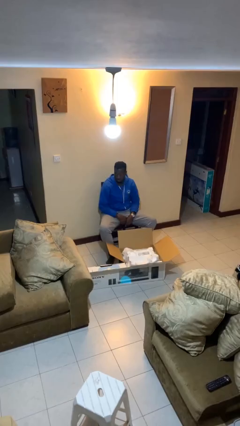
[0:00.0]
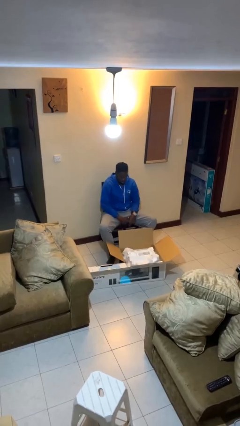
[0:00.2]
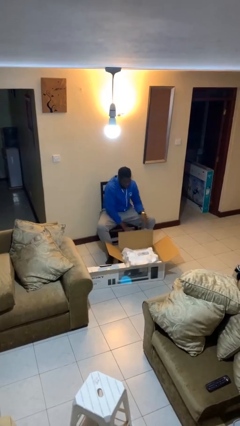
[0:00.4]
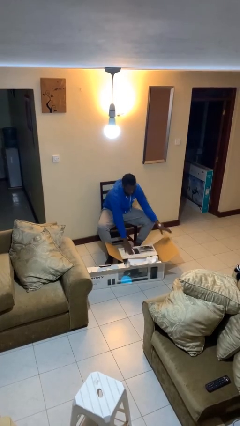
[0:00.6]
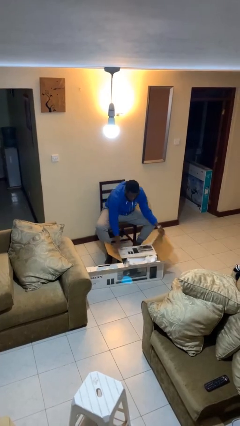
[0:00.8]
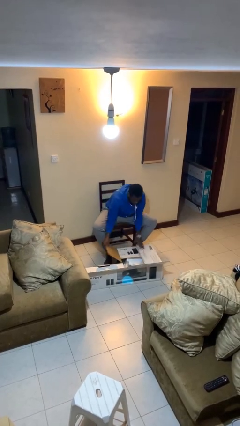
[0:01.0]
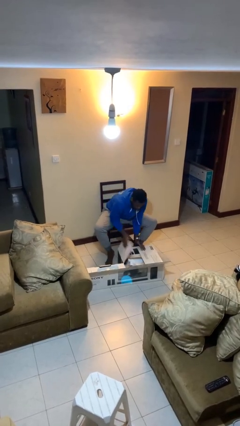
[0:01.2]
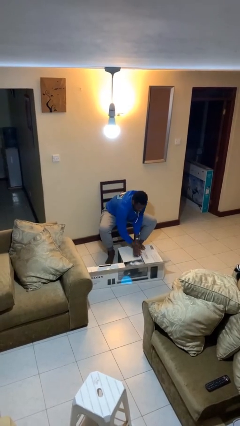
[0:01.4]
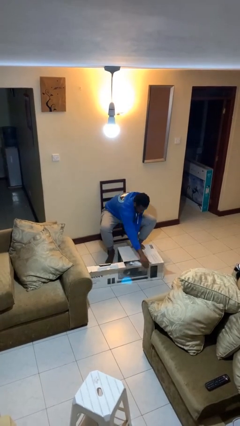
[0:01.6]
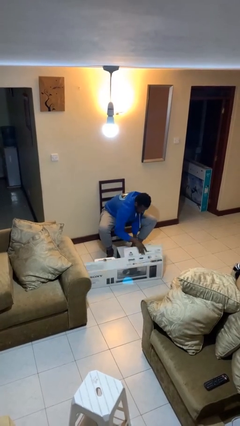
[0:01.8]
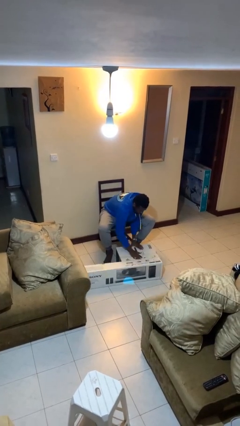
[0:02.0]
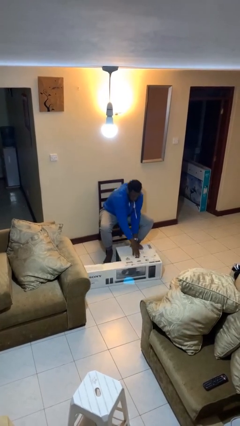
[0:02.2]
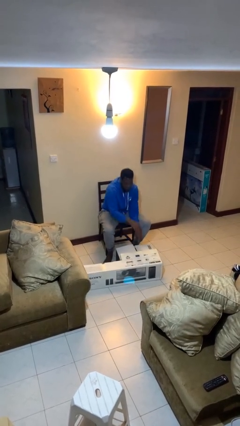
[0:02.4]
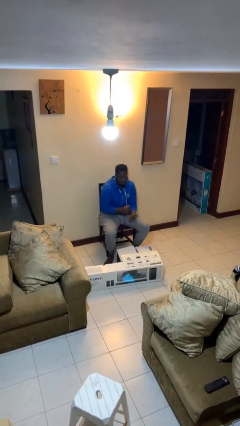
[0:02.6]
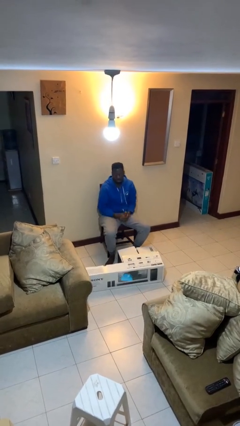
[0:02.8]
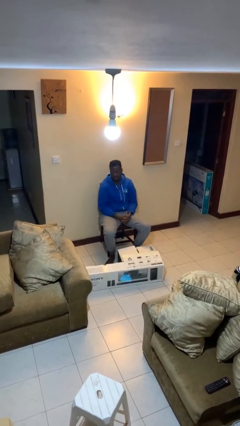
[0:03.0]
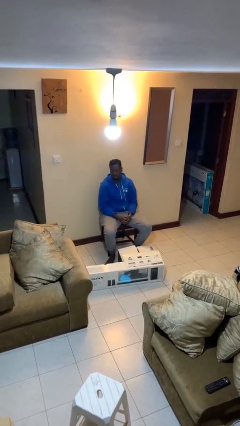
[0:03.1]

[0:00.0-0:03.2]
person closes box

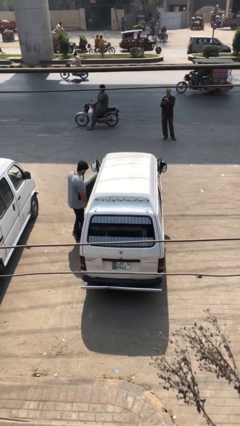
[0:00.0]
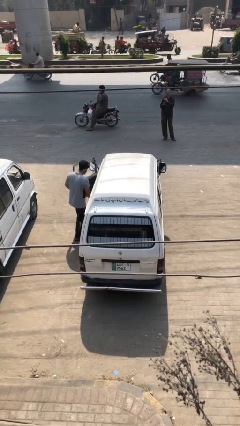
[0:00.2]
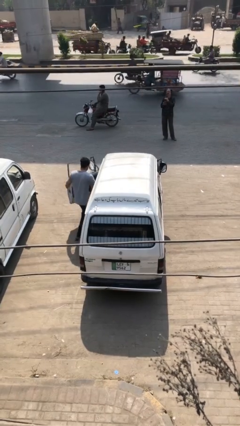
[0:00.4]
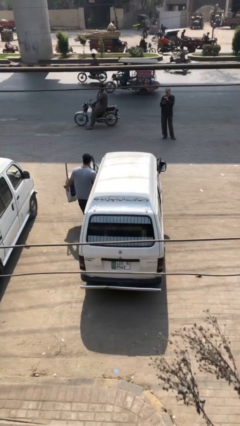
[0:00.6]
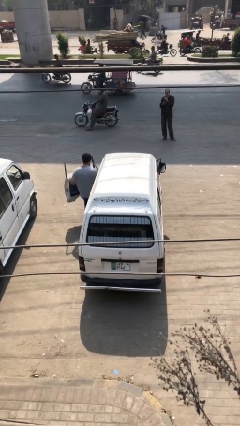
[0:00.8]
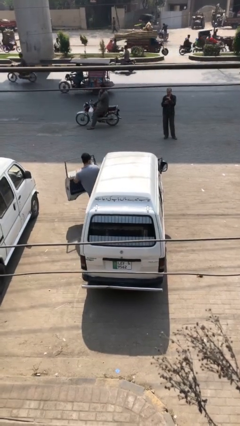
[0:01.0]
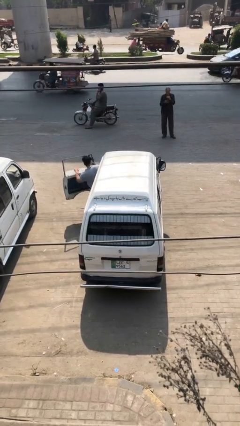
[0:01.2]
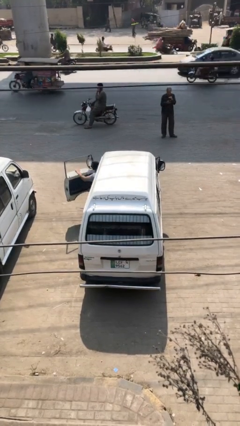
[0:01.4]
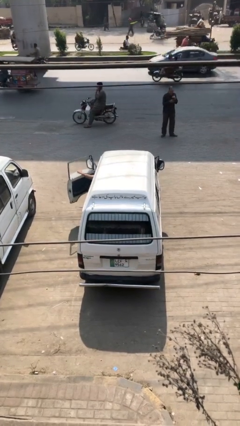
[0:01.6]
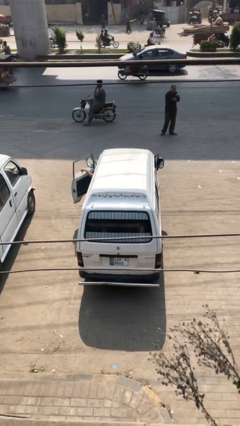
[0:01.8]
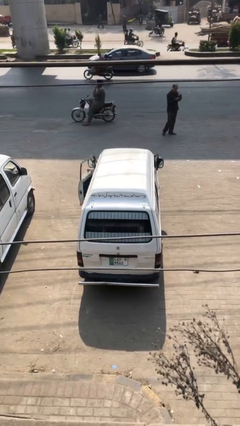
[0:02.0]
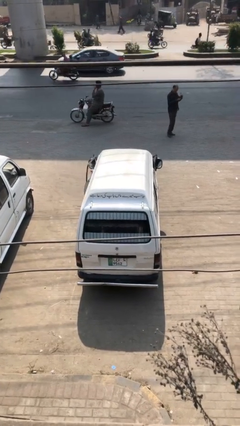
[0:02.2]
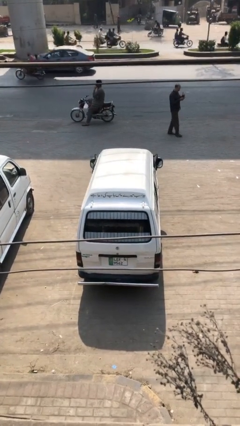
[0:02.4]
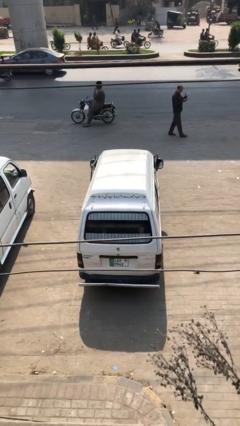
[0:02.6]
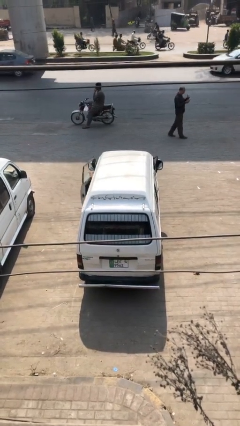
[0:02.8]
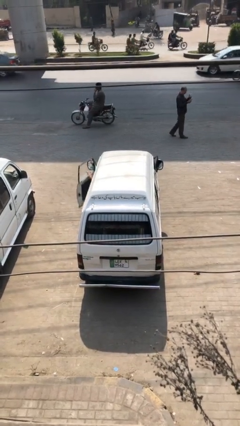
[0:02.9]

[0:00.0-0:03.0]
car picks up person

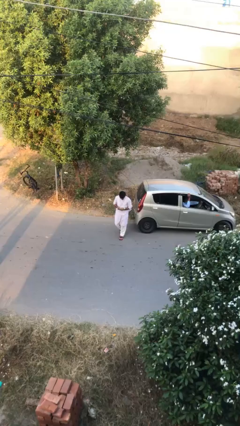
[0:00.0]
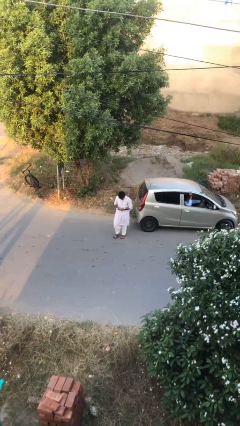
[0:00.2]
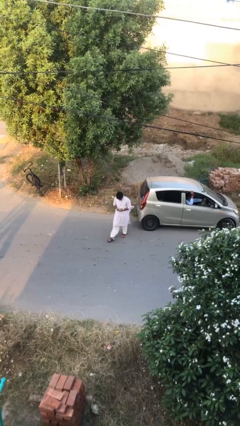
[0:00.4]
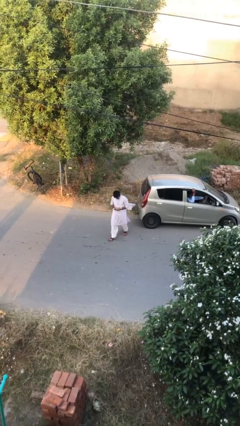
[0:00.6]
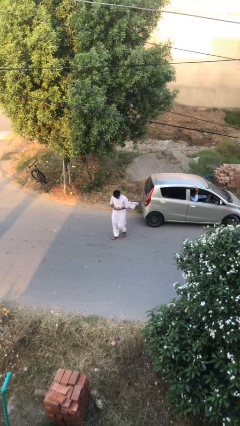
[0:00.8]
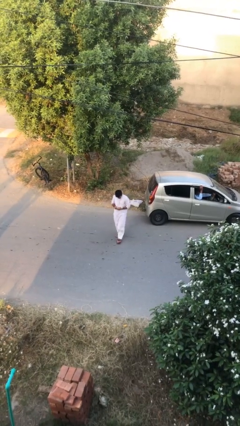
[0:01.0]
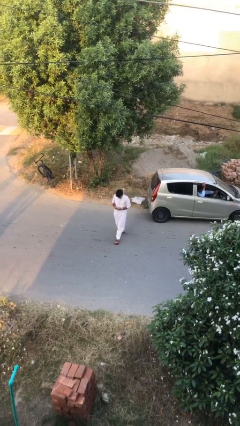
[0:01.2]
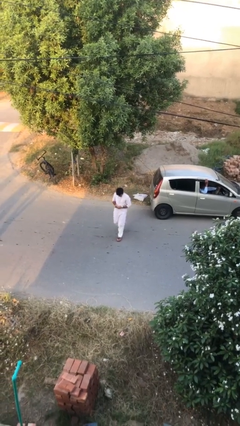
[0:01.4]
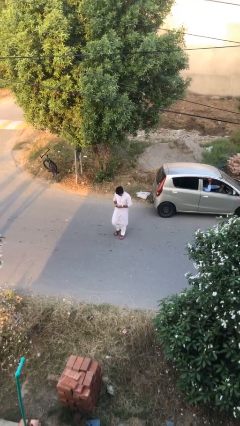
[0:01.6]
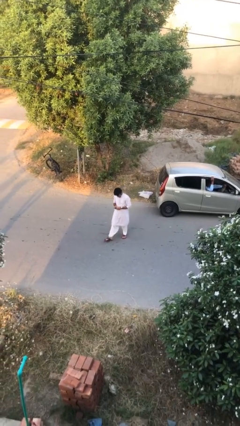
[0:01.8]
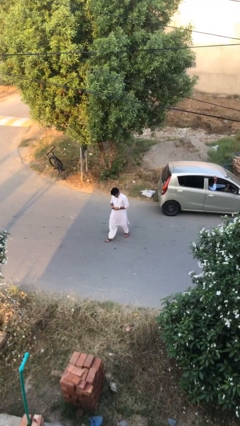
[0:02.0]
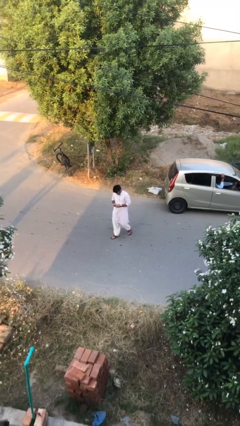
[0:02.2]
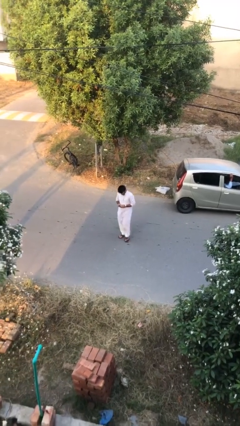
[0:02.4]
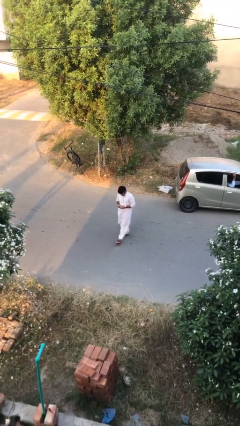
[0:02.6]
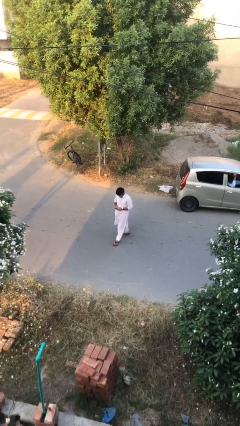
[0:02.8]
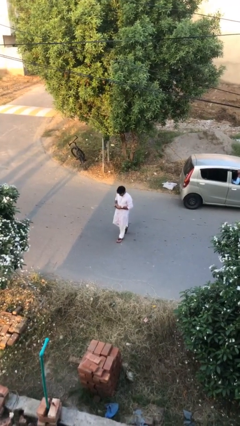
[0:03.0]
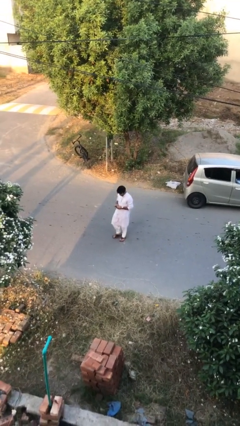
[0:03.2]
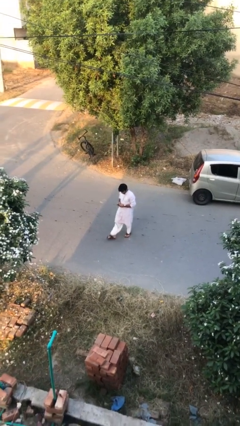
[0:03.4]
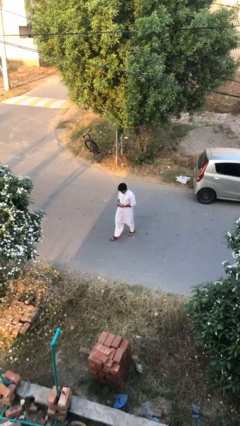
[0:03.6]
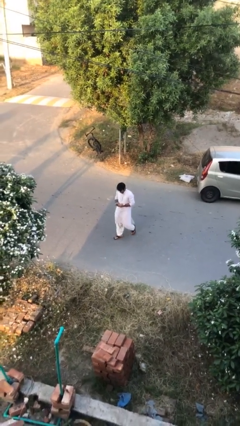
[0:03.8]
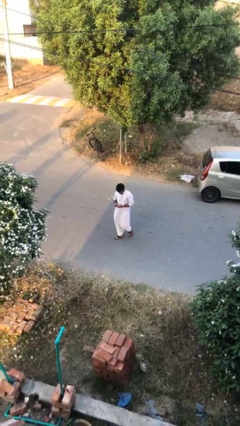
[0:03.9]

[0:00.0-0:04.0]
person texts on phone

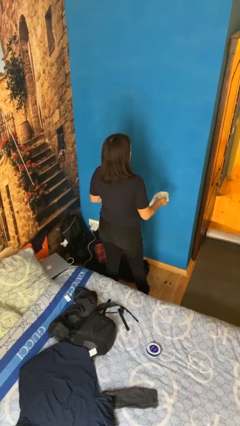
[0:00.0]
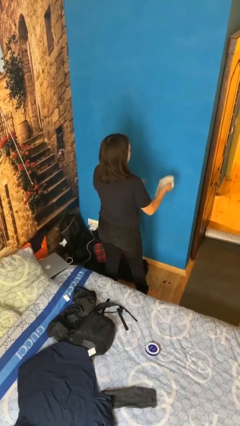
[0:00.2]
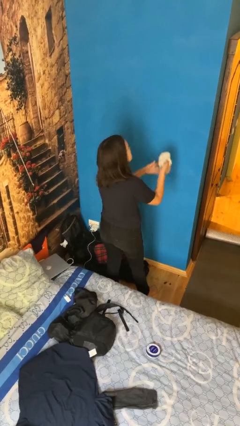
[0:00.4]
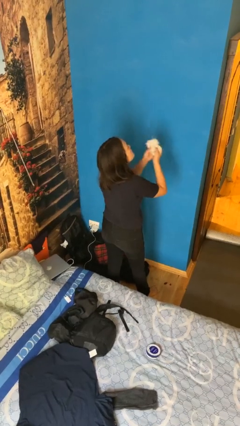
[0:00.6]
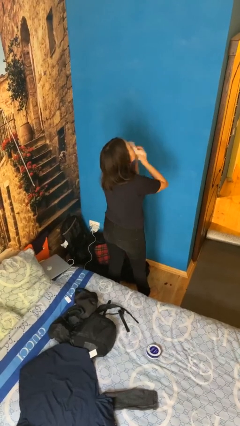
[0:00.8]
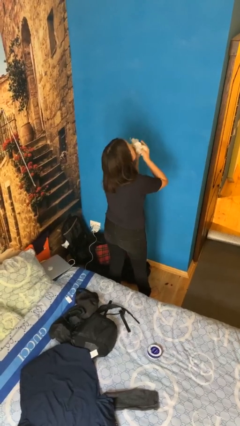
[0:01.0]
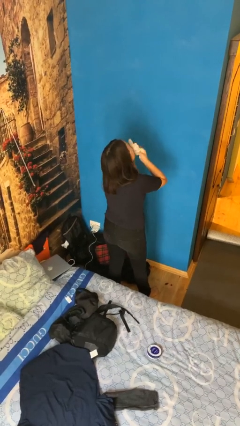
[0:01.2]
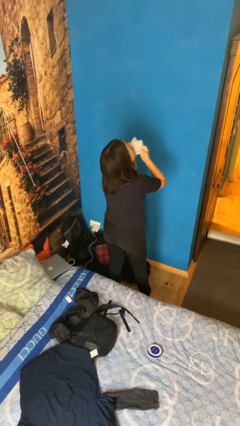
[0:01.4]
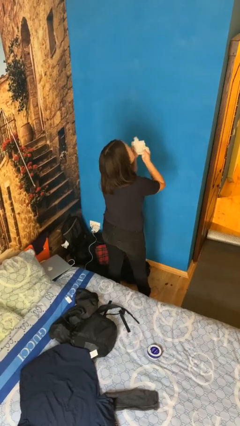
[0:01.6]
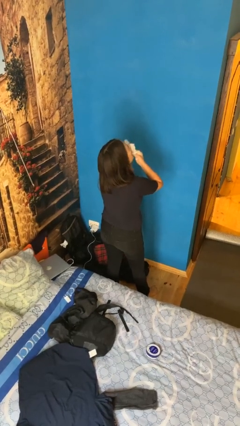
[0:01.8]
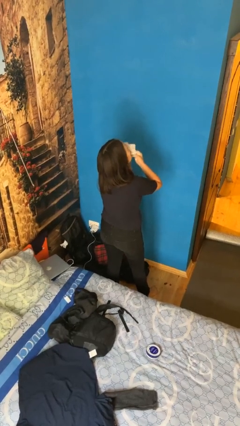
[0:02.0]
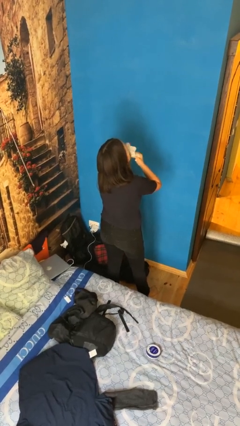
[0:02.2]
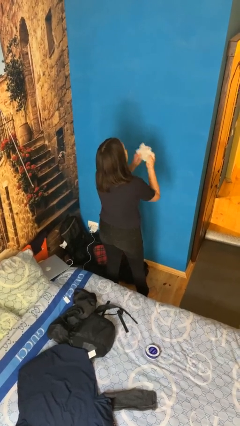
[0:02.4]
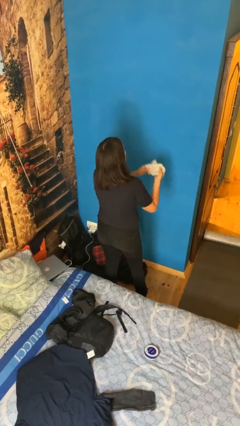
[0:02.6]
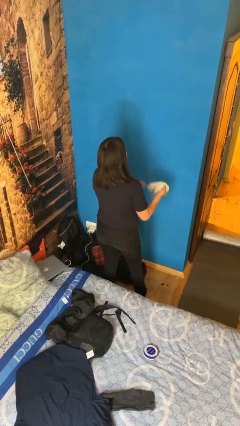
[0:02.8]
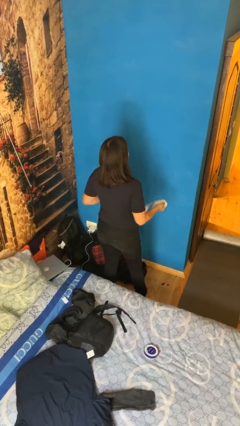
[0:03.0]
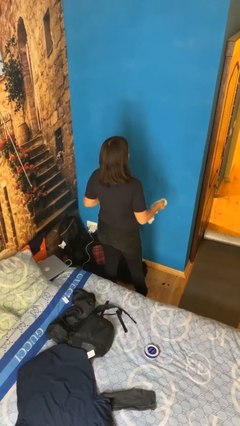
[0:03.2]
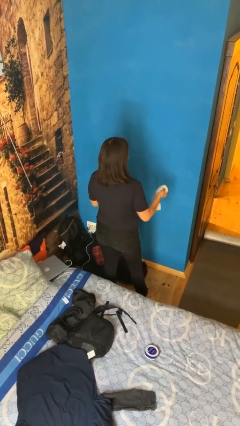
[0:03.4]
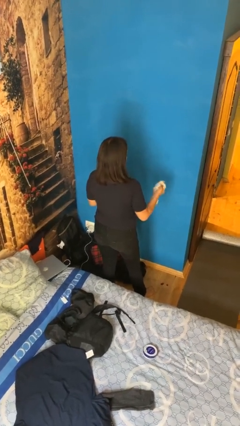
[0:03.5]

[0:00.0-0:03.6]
person wipes mouth with napkin

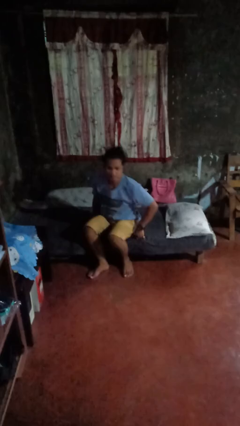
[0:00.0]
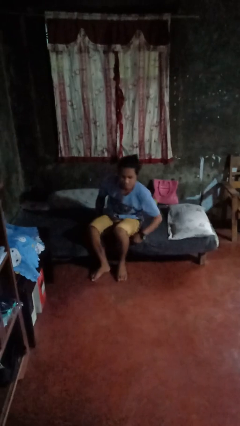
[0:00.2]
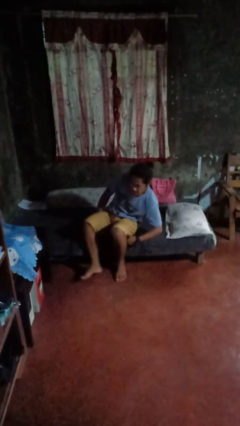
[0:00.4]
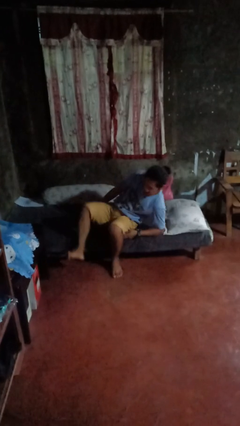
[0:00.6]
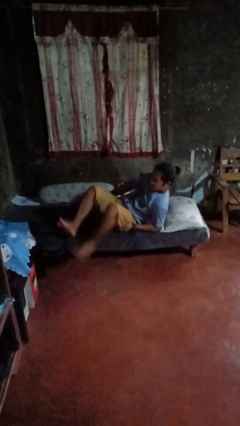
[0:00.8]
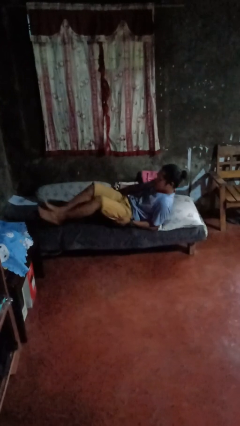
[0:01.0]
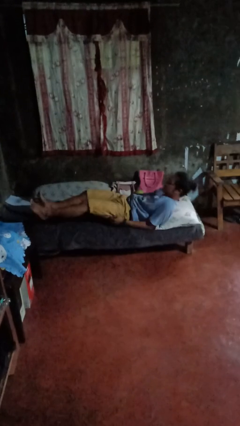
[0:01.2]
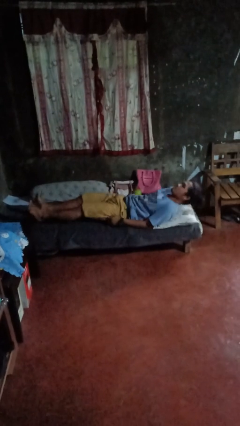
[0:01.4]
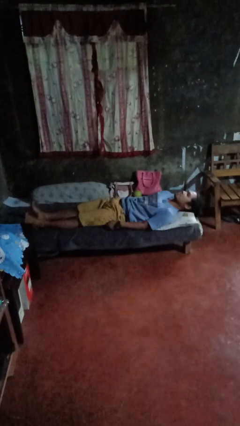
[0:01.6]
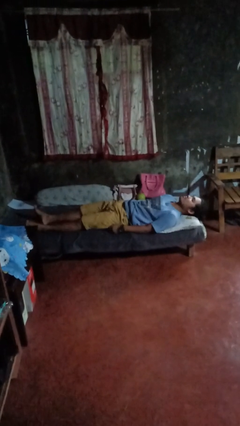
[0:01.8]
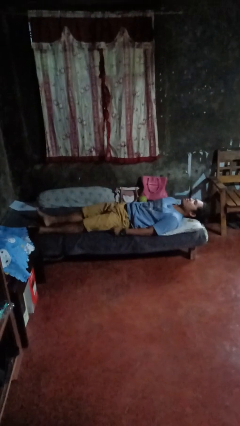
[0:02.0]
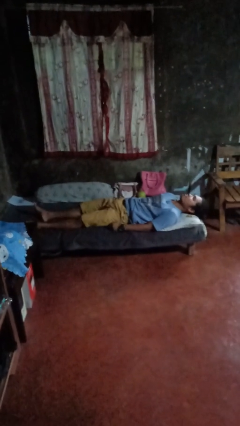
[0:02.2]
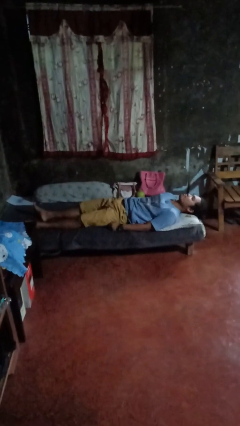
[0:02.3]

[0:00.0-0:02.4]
person lies down on bed

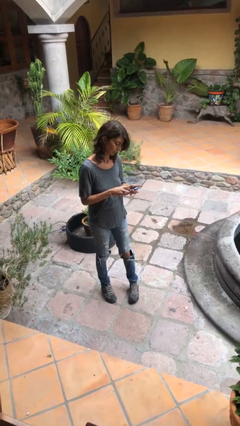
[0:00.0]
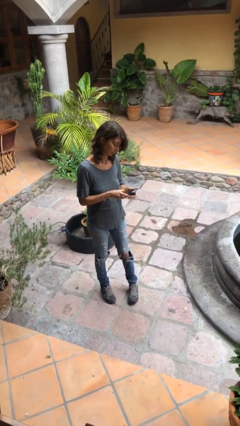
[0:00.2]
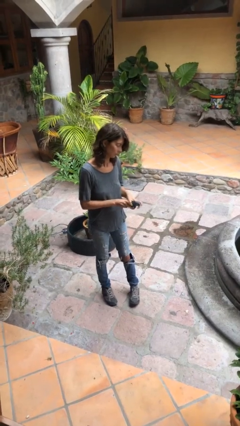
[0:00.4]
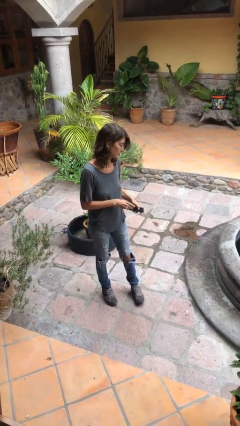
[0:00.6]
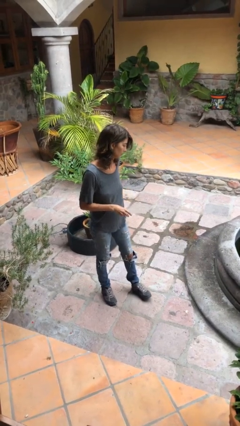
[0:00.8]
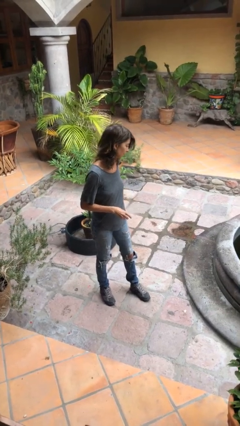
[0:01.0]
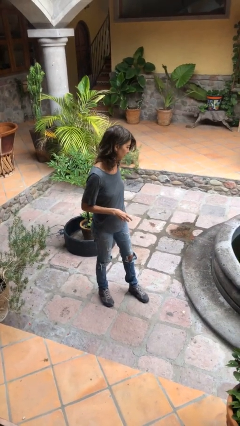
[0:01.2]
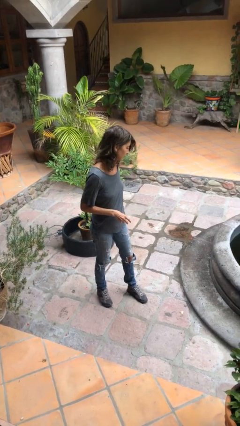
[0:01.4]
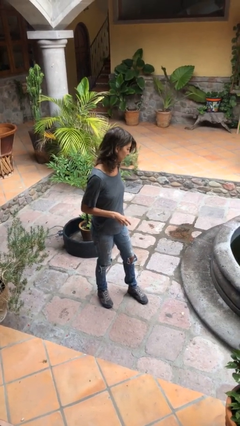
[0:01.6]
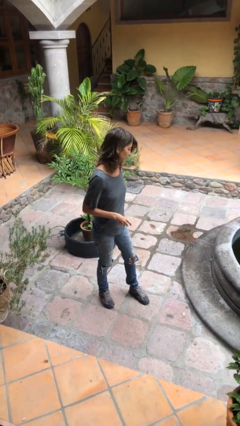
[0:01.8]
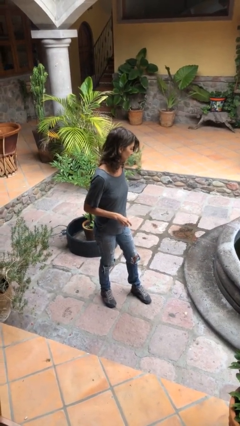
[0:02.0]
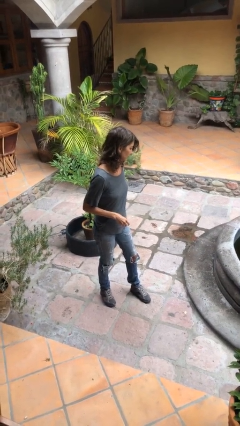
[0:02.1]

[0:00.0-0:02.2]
person puts phone into pocket
